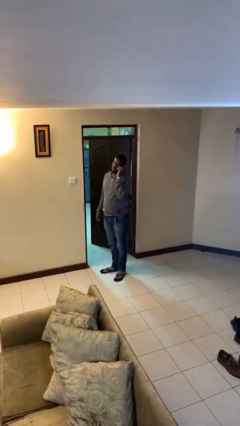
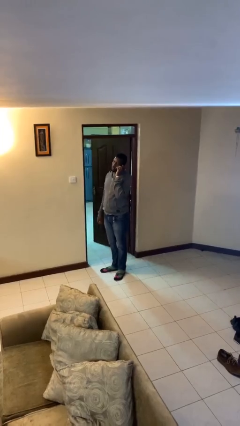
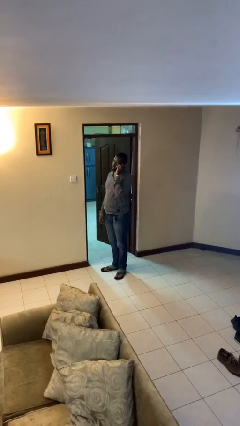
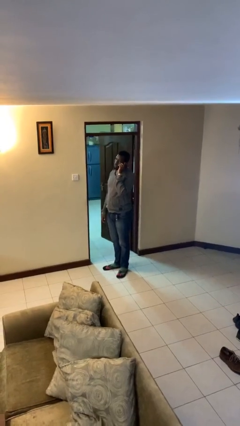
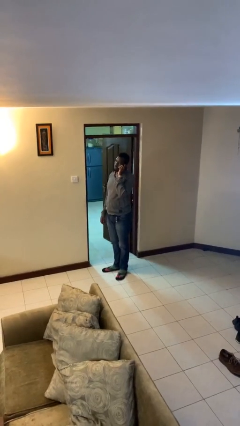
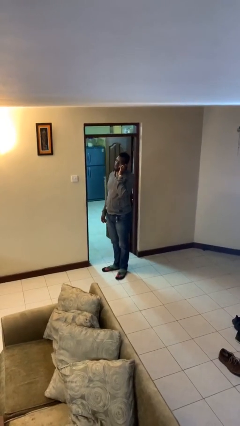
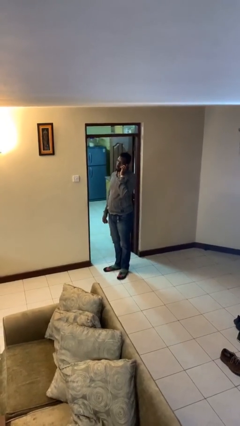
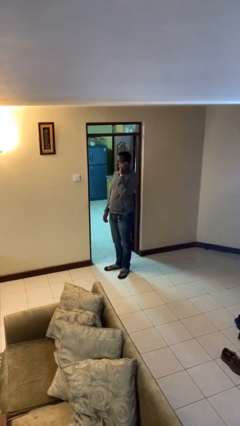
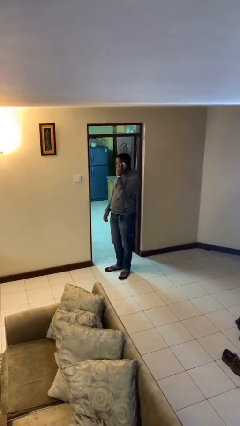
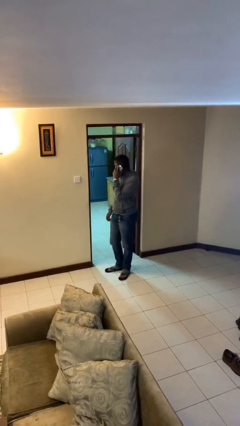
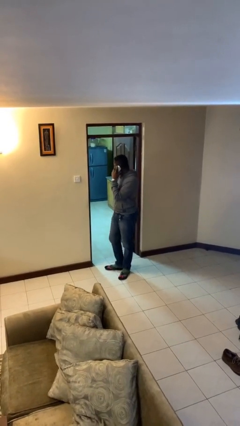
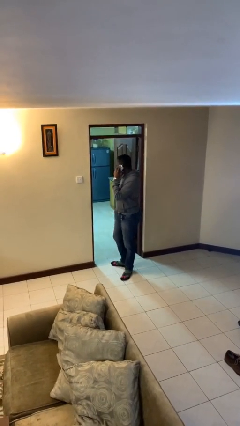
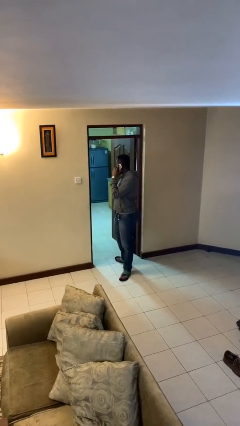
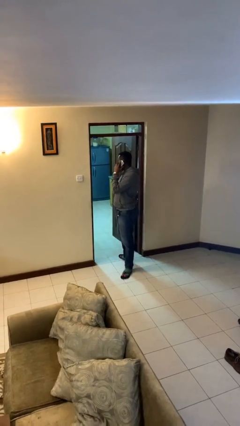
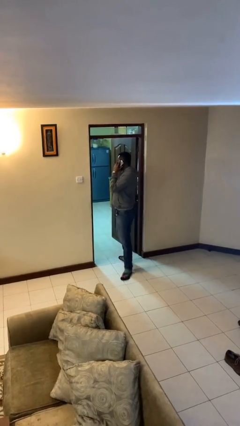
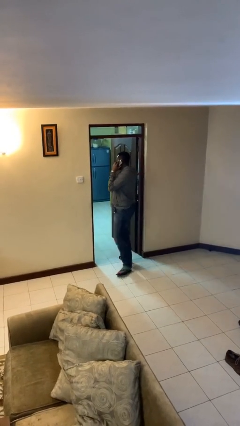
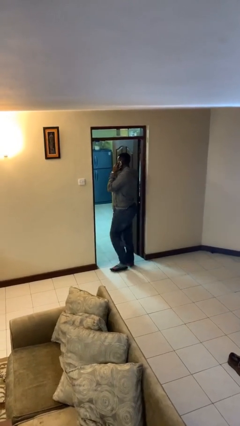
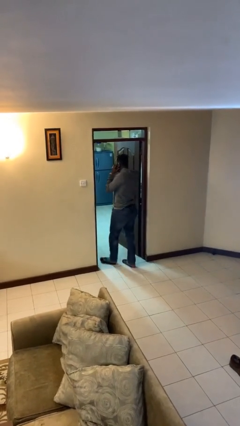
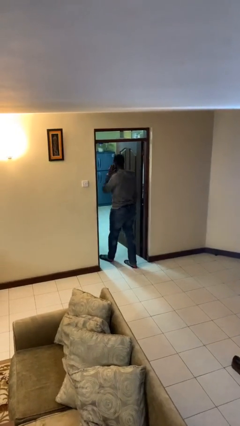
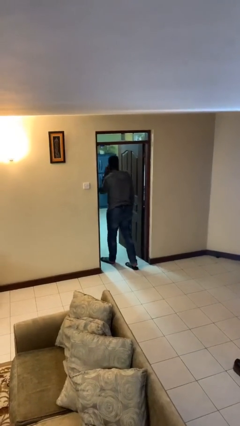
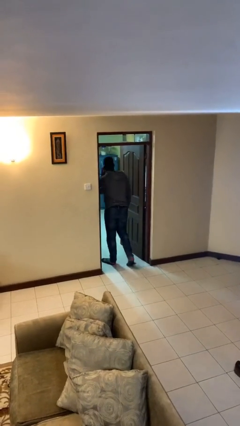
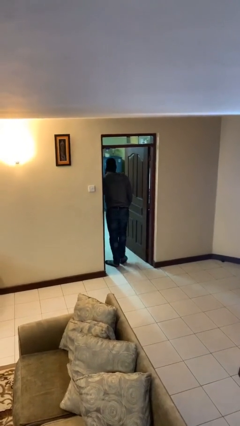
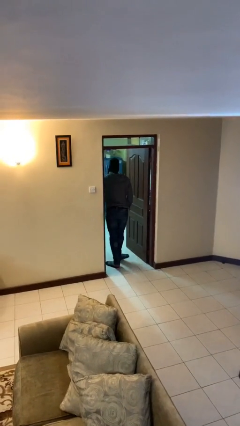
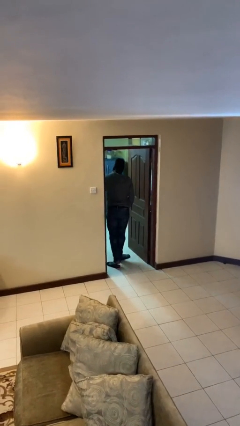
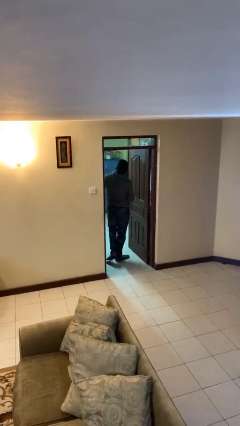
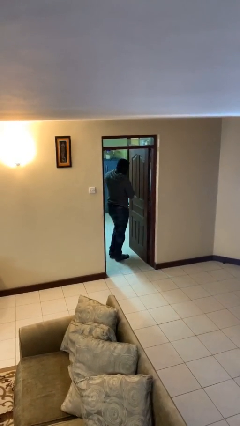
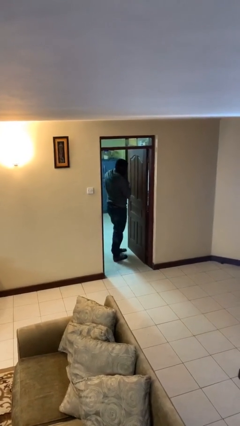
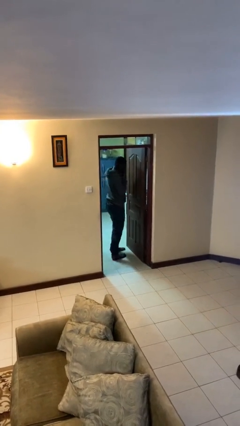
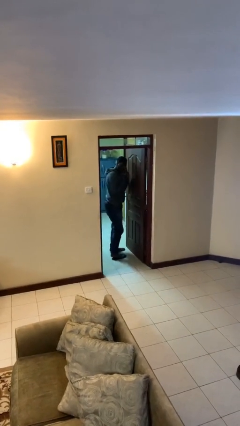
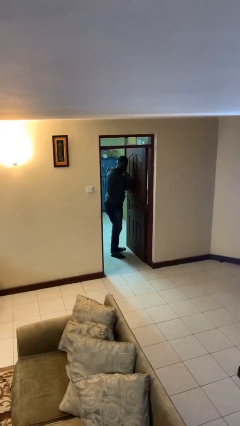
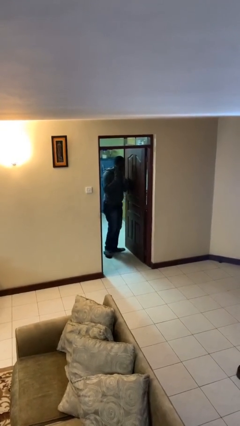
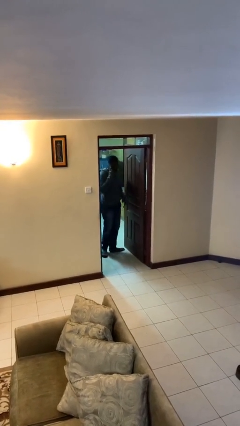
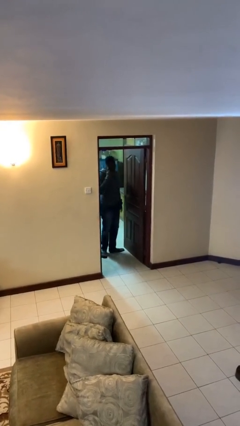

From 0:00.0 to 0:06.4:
person exits scene through structure

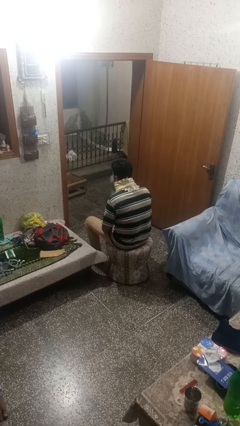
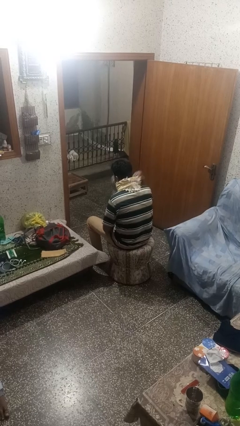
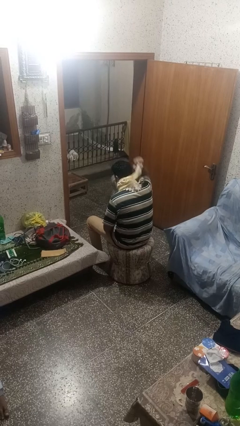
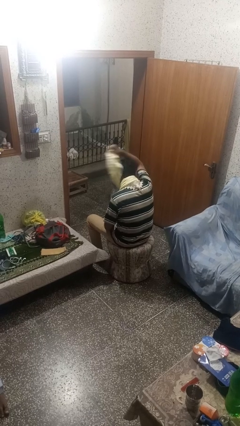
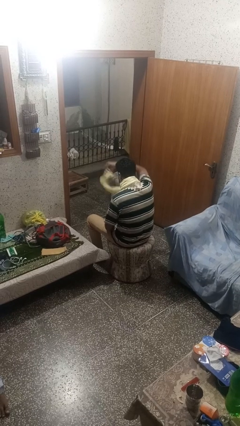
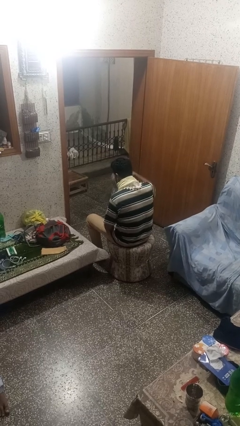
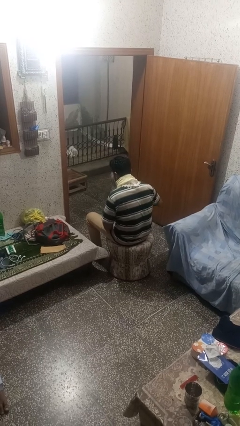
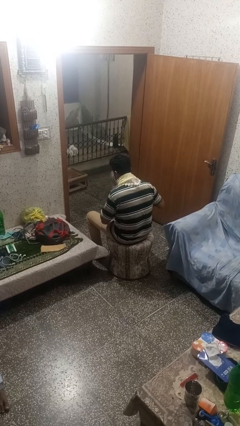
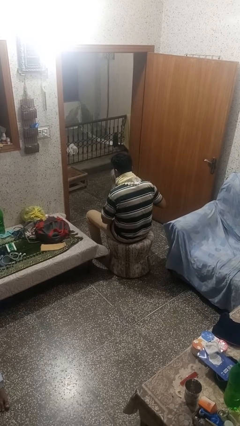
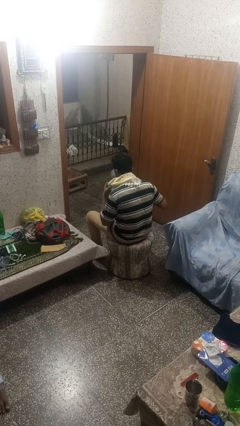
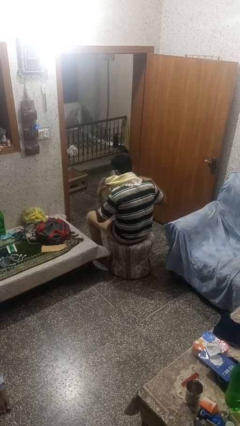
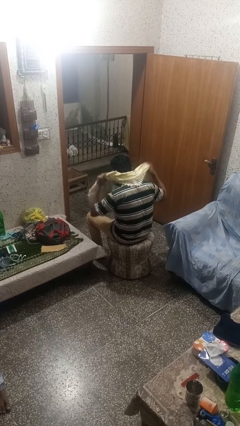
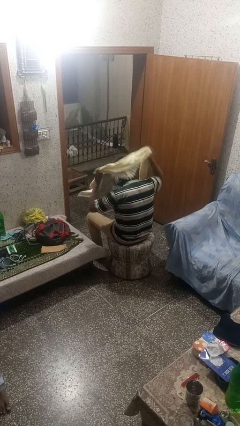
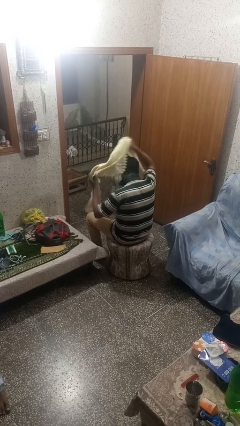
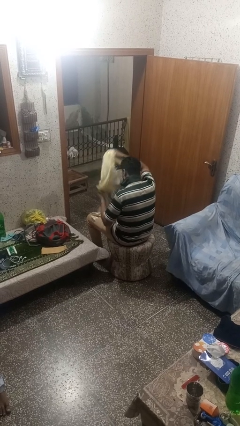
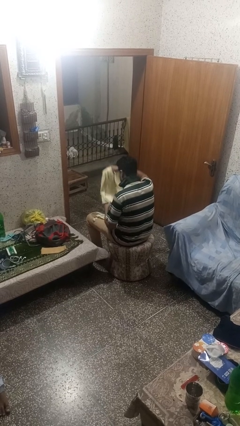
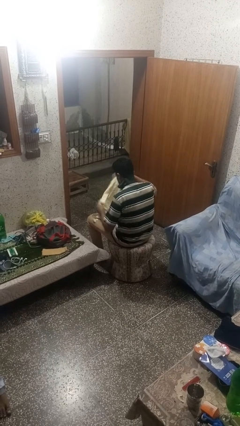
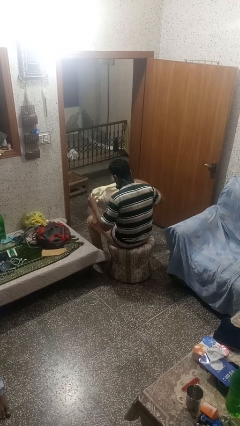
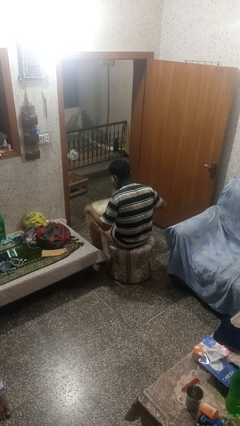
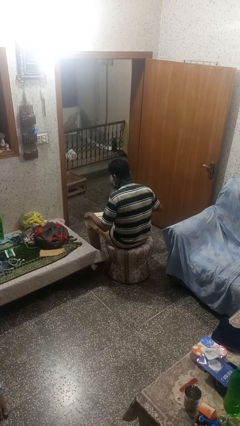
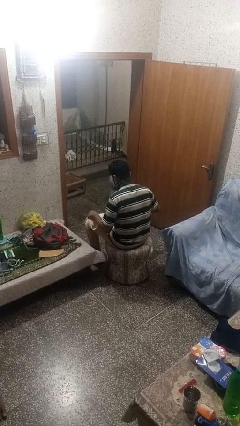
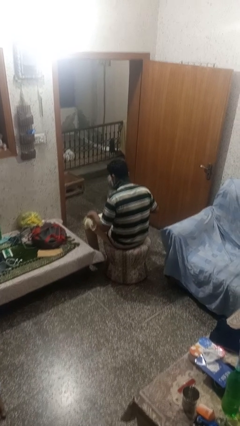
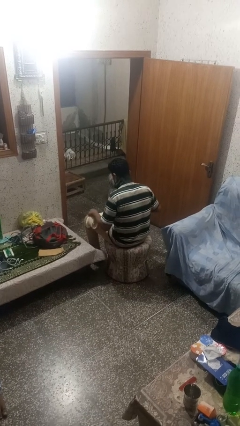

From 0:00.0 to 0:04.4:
person takes off scarf

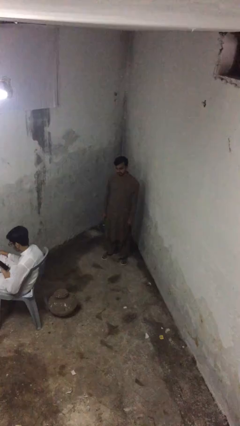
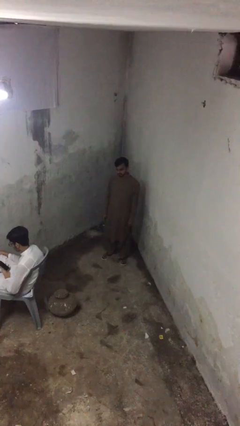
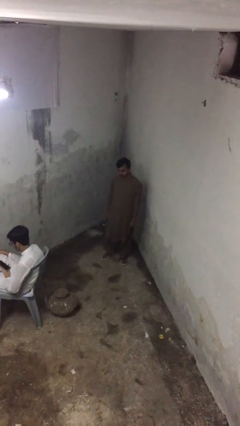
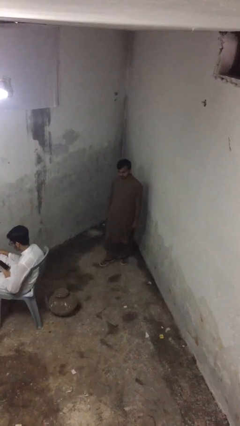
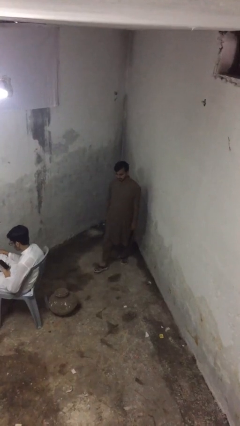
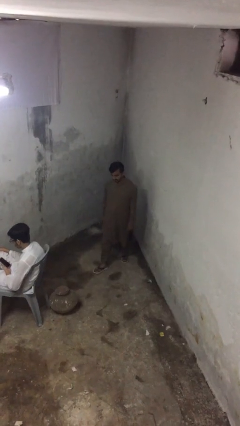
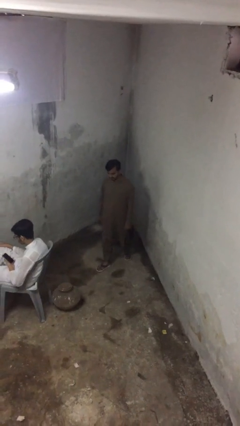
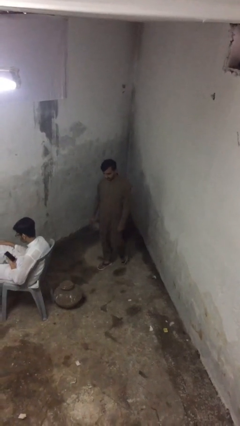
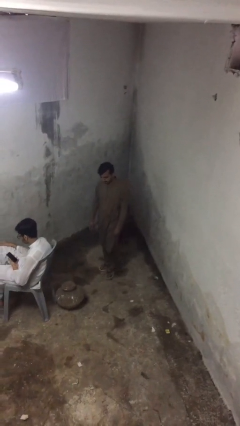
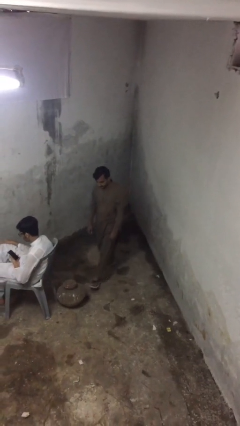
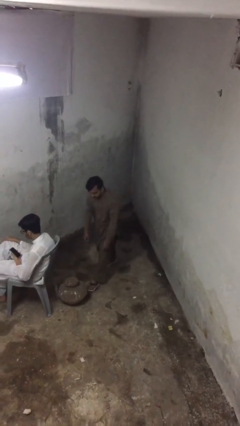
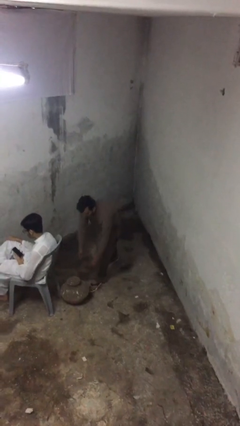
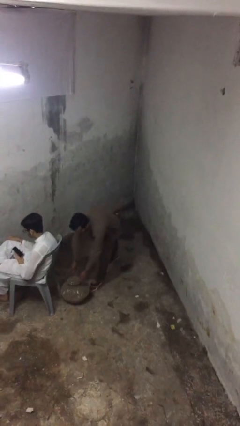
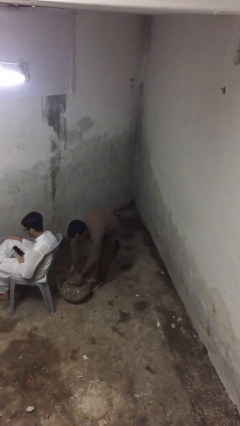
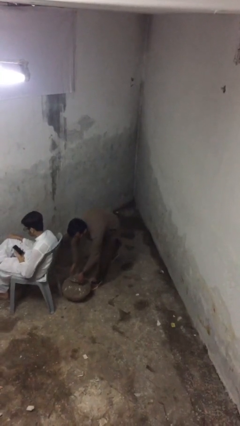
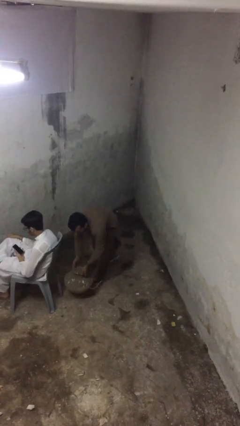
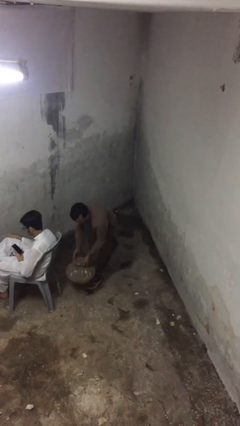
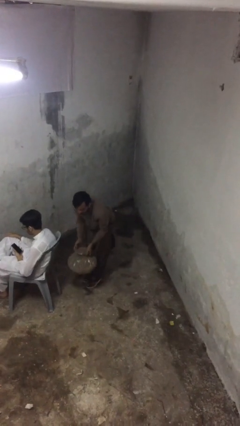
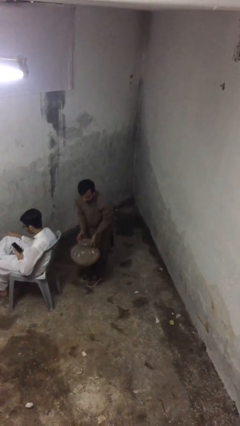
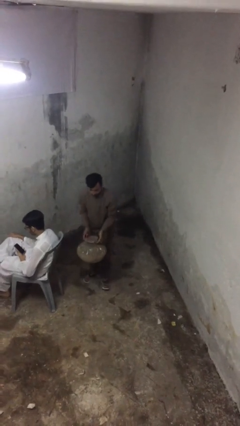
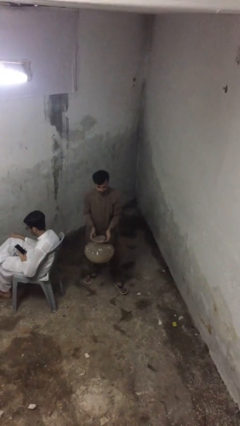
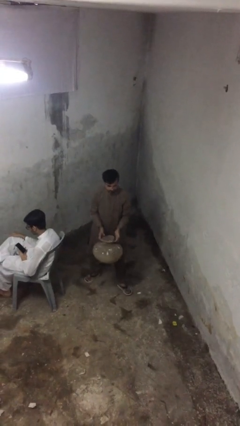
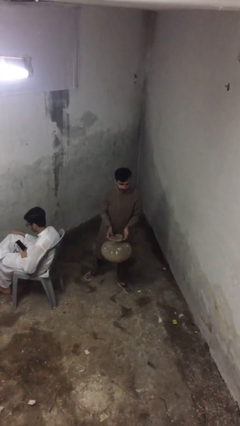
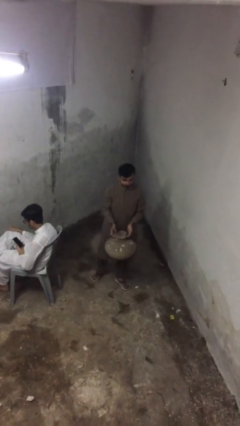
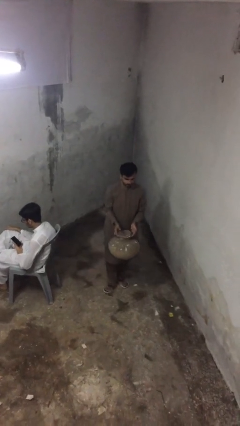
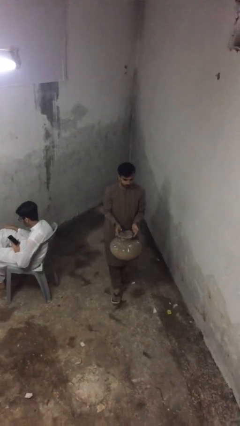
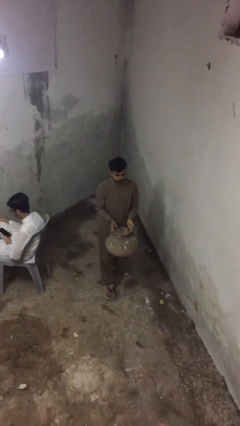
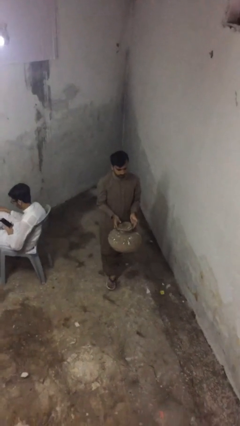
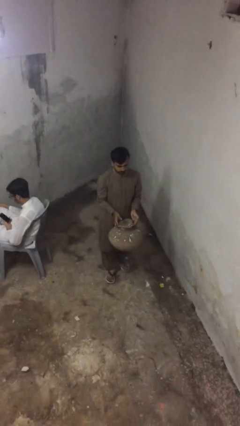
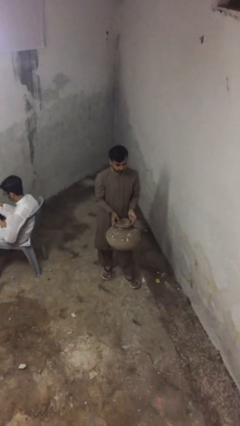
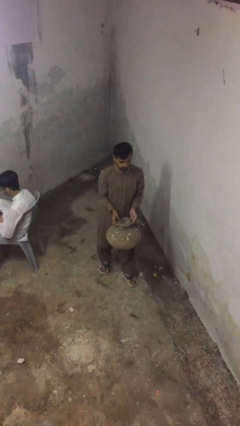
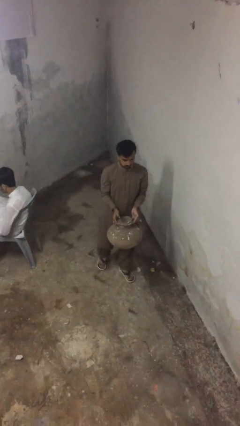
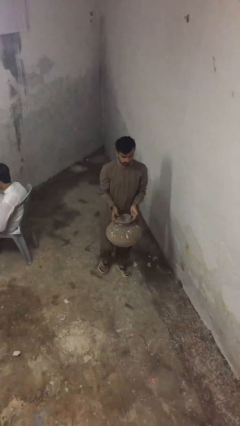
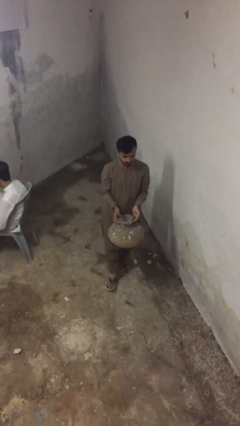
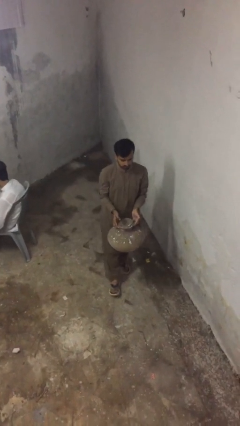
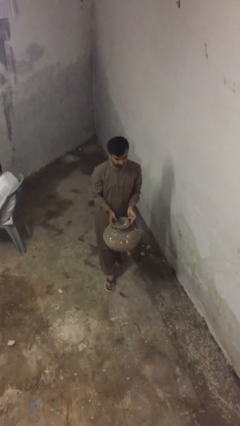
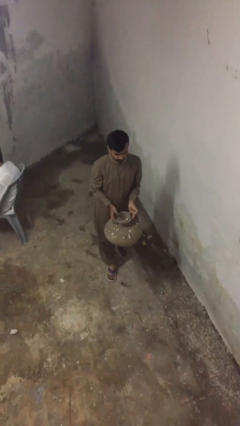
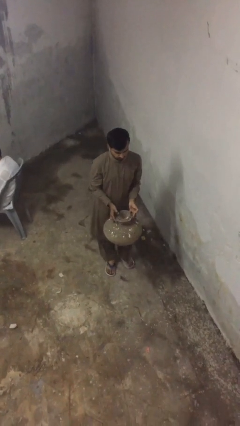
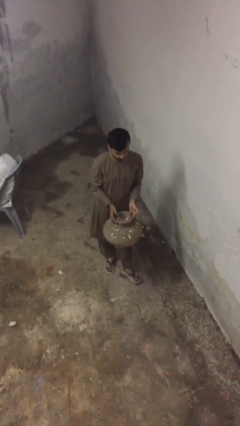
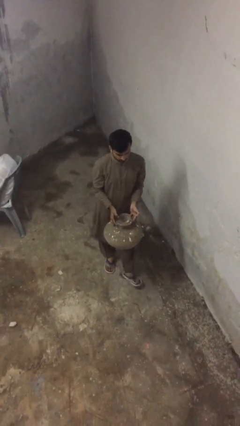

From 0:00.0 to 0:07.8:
person steals object from person
